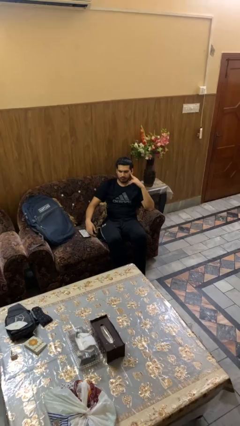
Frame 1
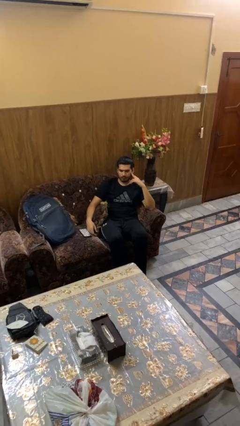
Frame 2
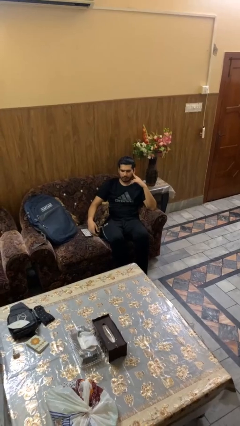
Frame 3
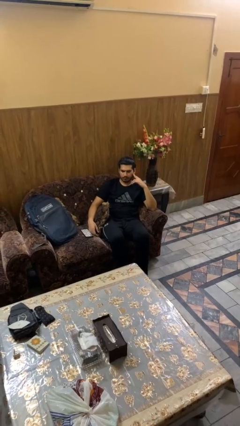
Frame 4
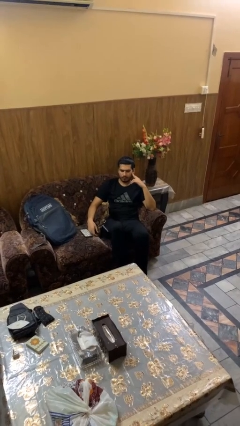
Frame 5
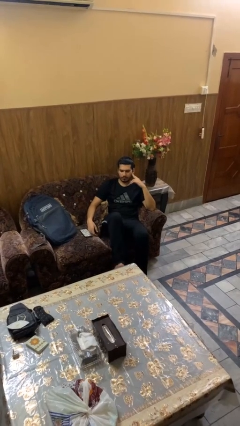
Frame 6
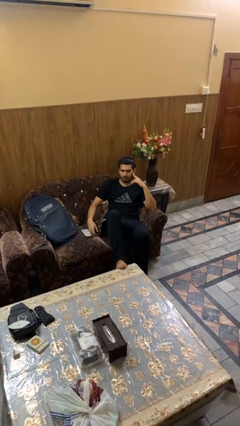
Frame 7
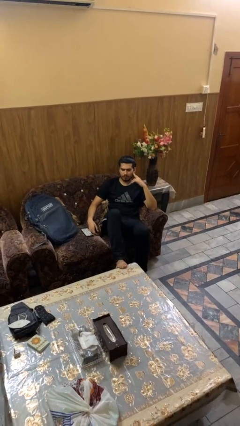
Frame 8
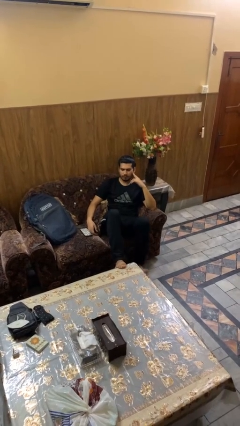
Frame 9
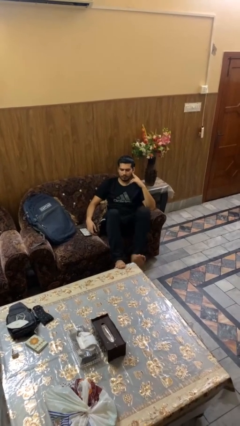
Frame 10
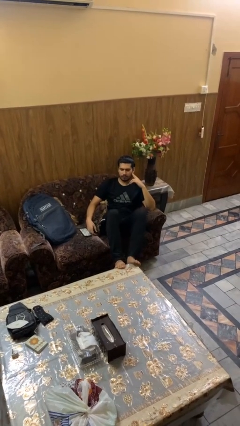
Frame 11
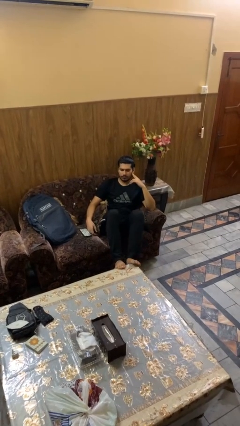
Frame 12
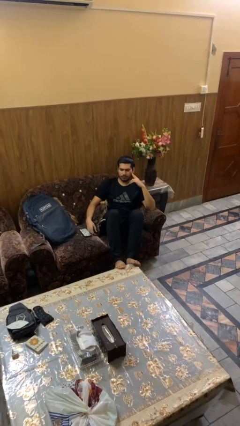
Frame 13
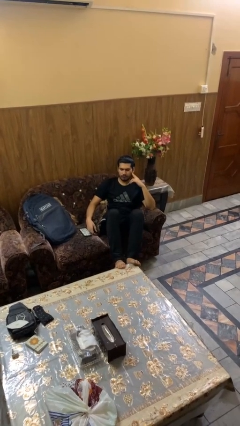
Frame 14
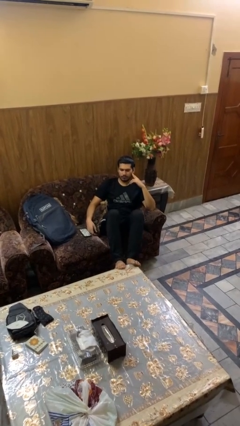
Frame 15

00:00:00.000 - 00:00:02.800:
person puts feet up

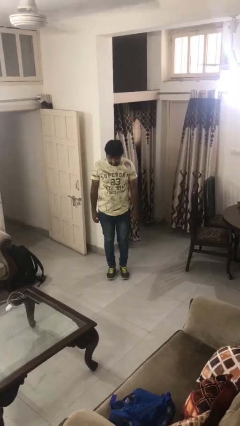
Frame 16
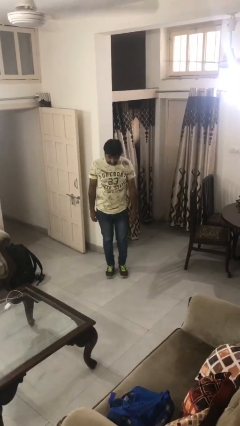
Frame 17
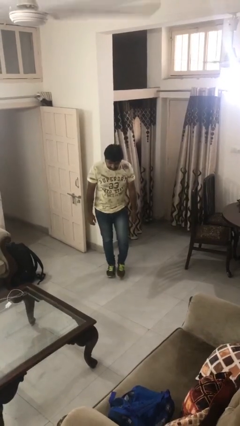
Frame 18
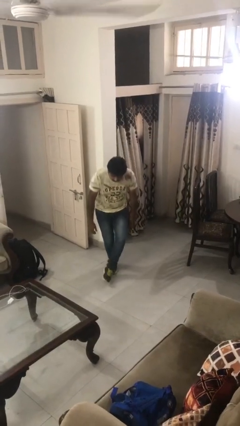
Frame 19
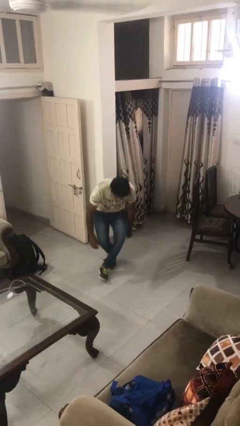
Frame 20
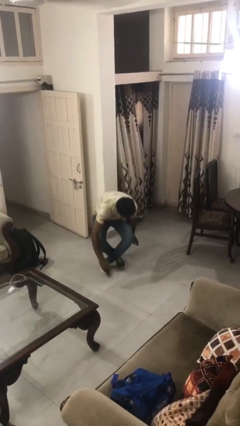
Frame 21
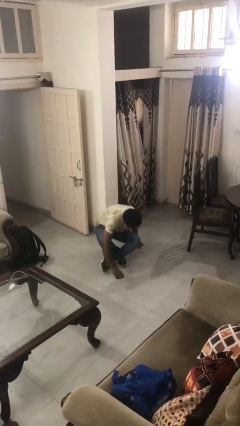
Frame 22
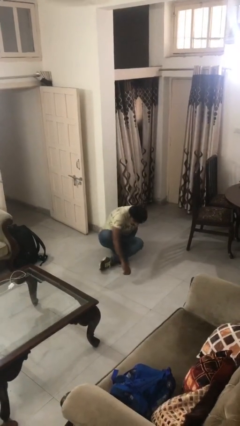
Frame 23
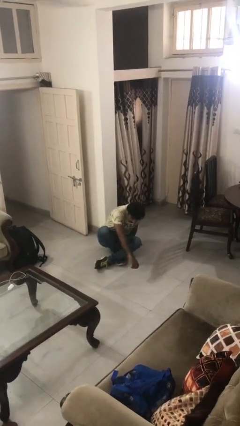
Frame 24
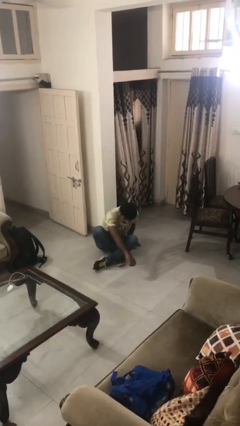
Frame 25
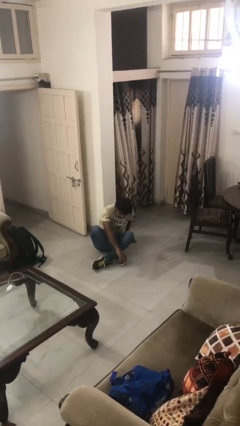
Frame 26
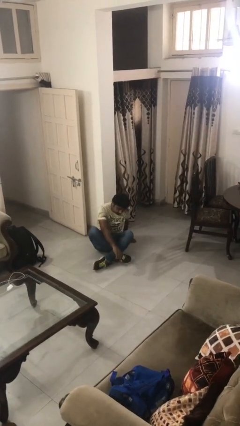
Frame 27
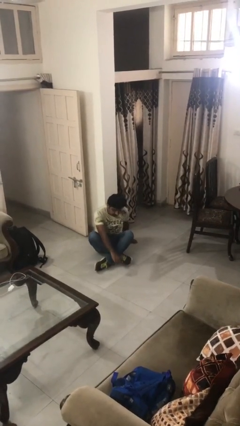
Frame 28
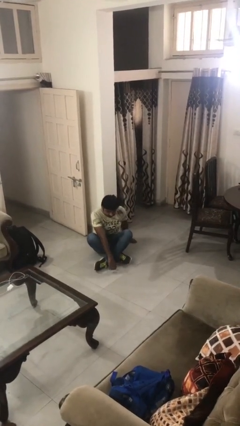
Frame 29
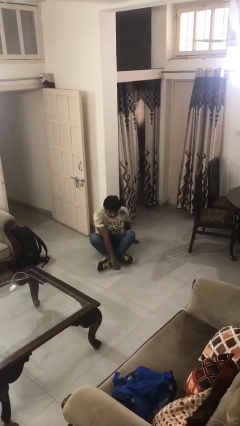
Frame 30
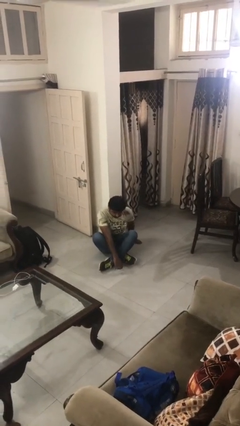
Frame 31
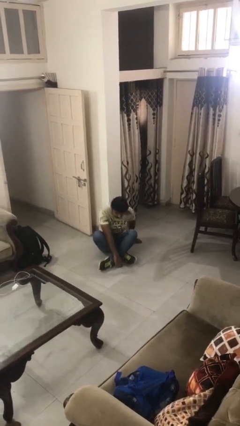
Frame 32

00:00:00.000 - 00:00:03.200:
person sits crisscross

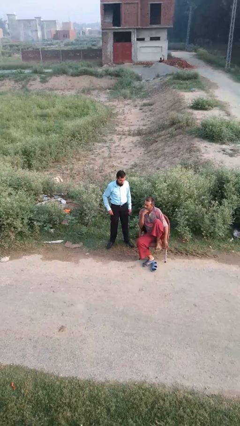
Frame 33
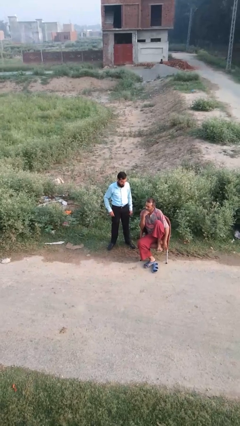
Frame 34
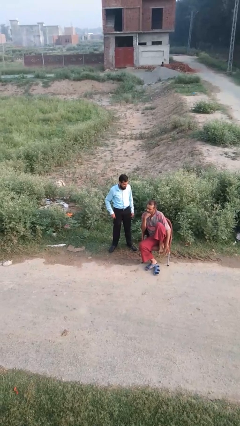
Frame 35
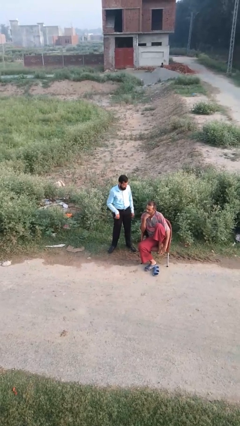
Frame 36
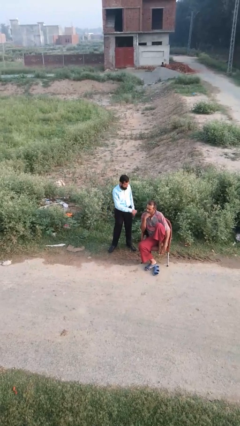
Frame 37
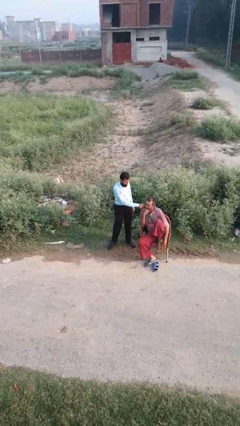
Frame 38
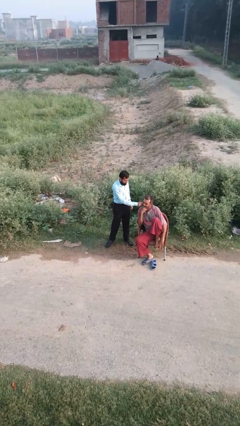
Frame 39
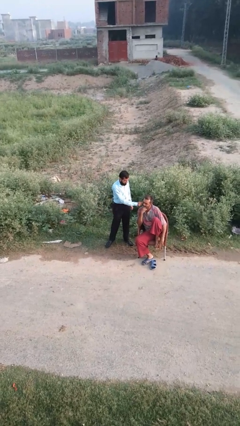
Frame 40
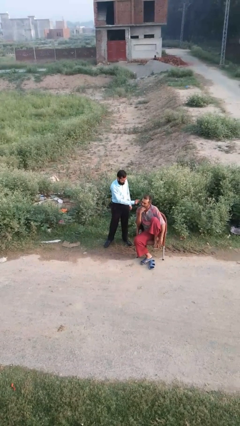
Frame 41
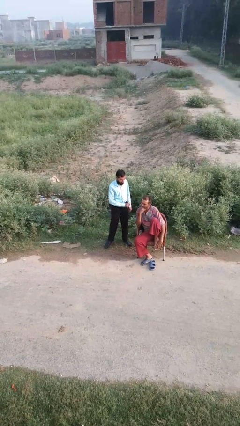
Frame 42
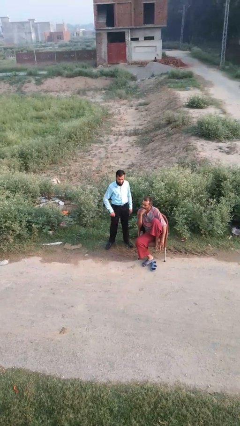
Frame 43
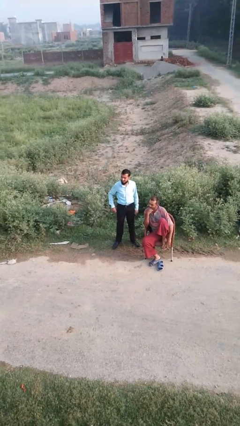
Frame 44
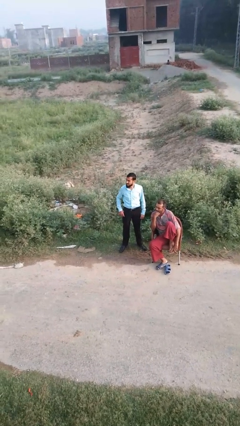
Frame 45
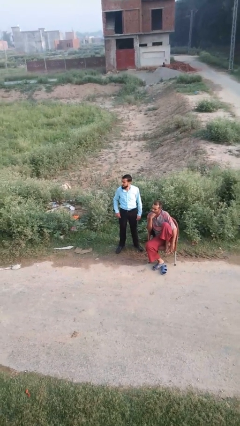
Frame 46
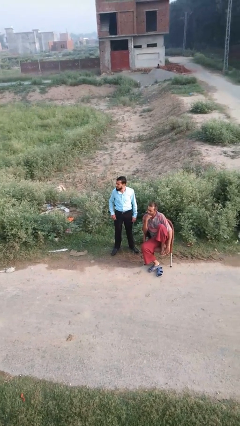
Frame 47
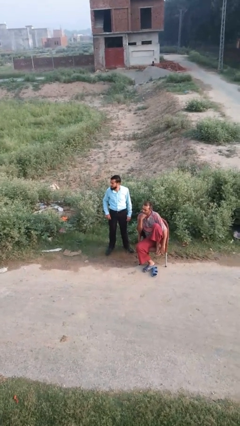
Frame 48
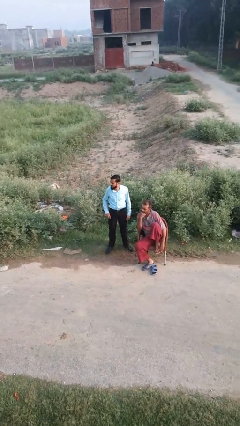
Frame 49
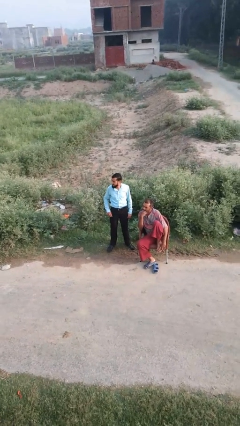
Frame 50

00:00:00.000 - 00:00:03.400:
person touches face of person

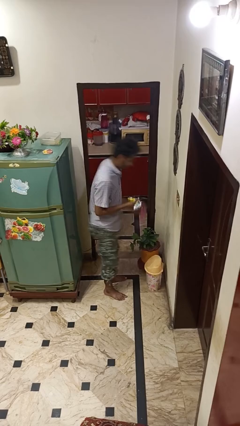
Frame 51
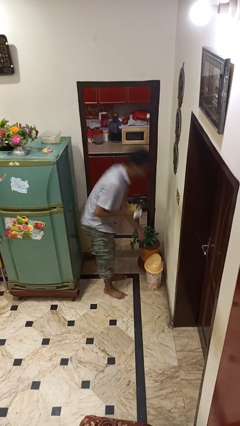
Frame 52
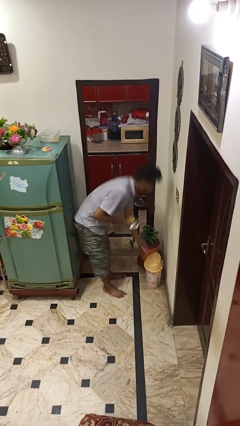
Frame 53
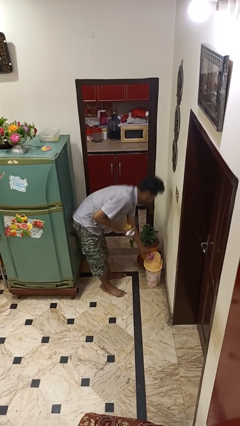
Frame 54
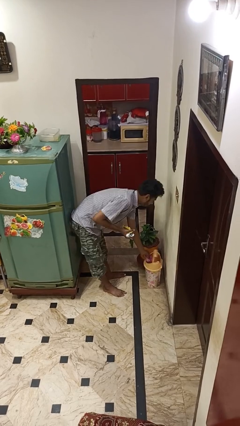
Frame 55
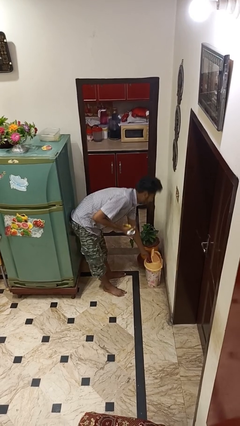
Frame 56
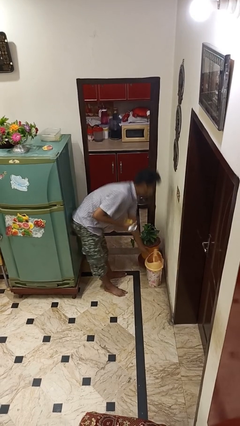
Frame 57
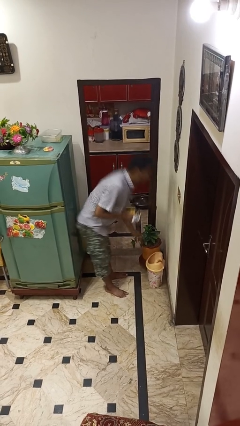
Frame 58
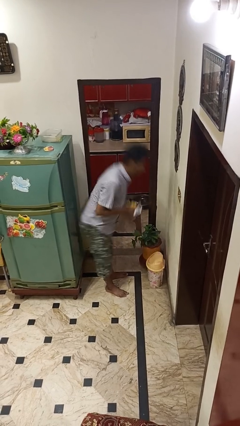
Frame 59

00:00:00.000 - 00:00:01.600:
person discards trash

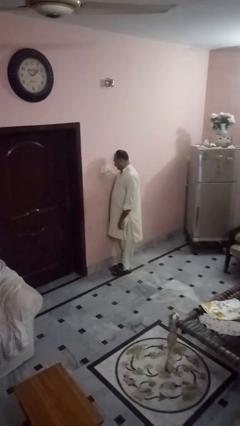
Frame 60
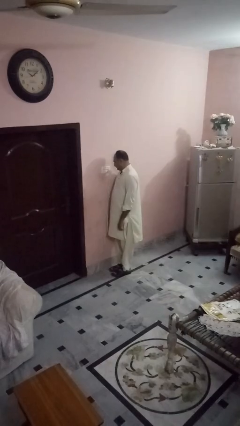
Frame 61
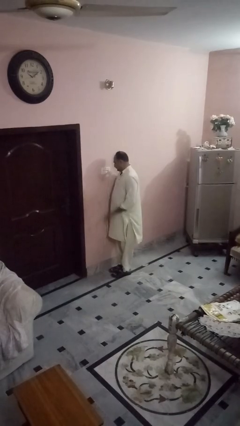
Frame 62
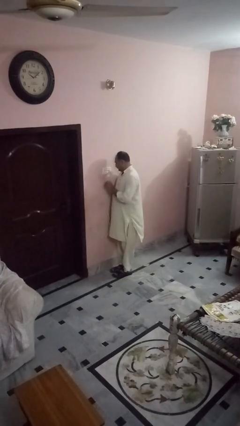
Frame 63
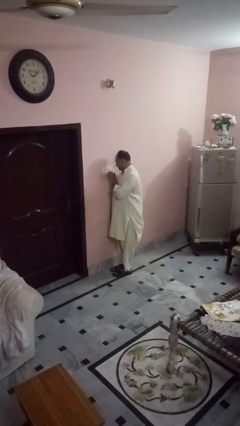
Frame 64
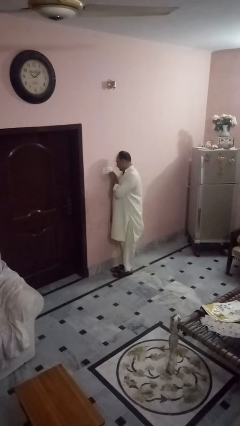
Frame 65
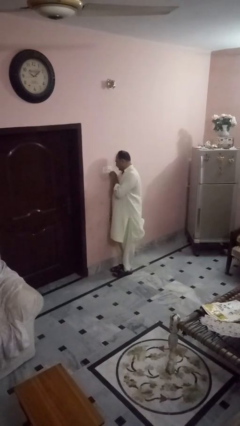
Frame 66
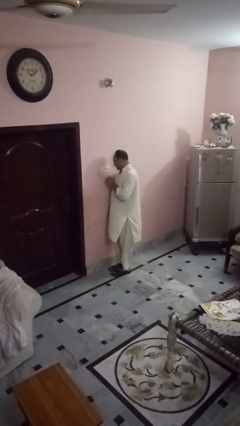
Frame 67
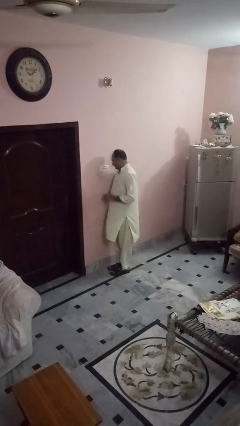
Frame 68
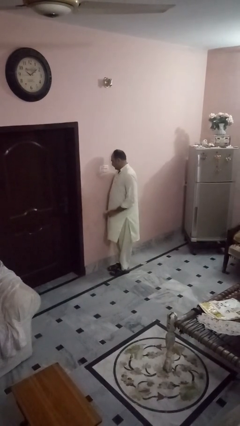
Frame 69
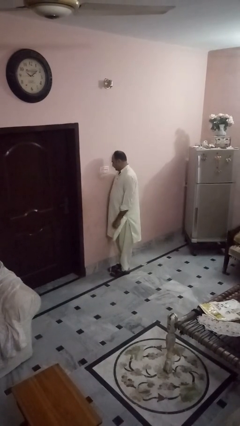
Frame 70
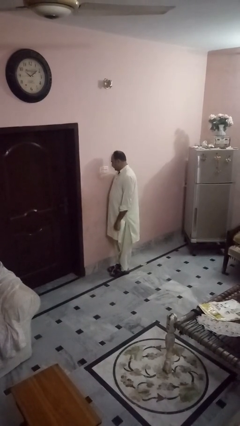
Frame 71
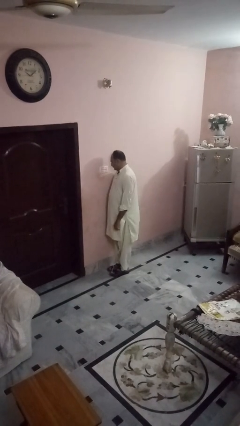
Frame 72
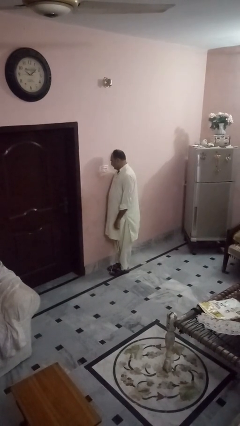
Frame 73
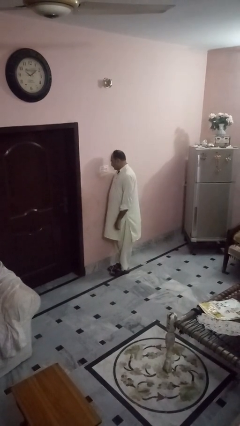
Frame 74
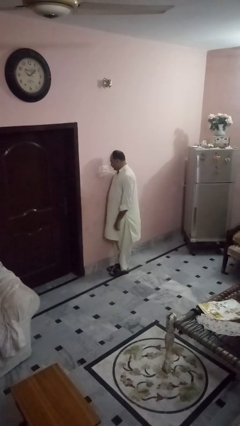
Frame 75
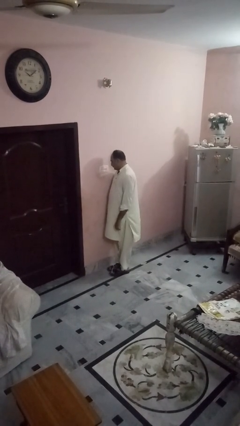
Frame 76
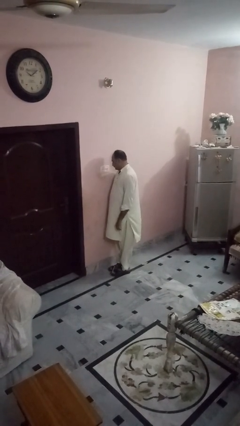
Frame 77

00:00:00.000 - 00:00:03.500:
person unplugs from electrical socket

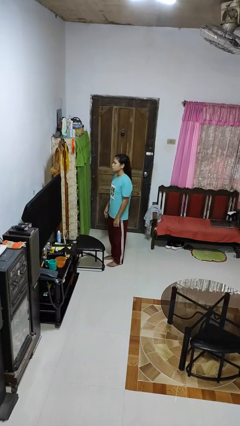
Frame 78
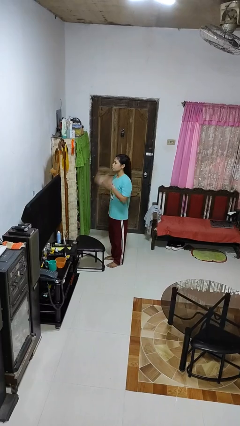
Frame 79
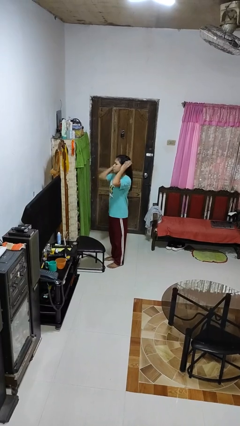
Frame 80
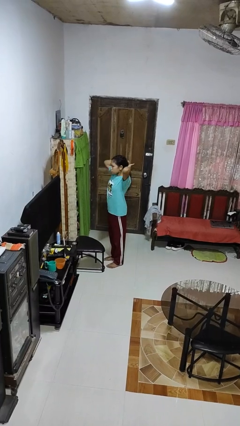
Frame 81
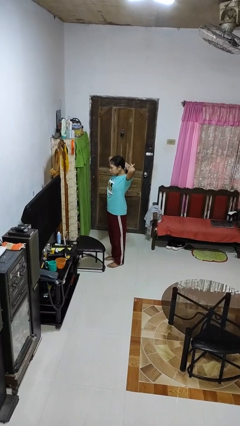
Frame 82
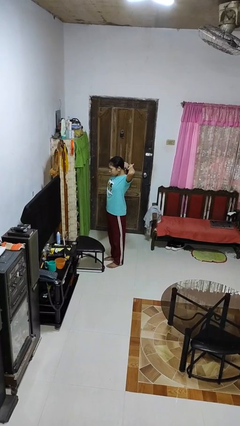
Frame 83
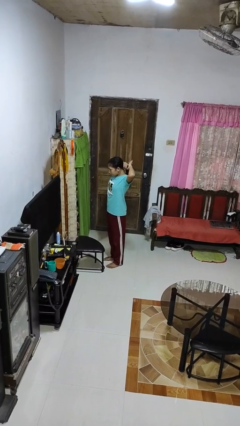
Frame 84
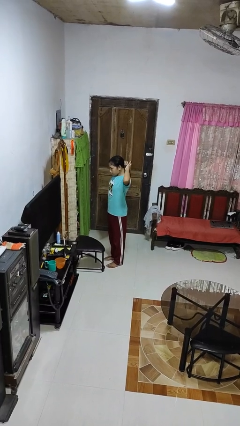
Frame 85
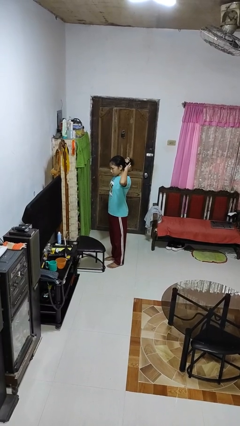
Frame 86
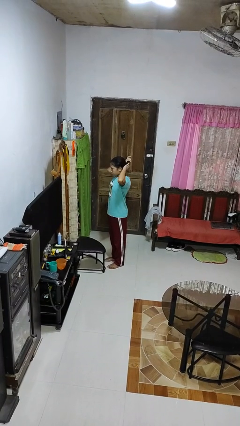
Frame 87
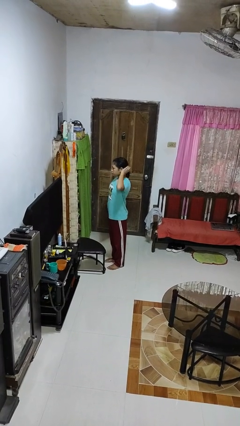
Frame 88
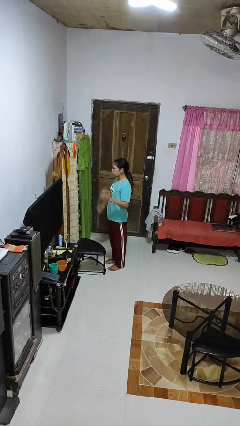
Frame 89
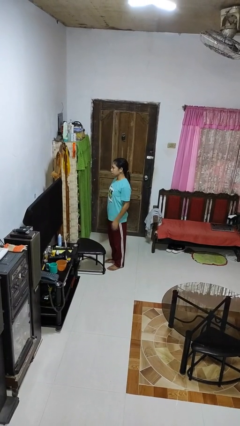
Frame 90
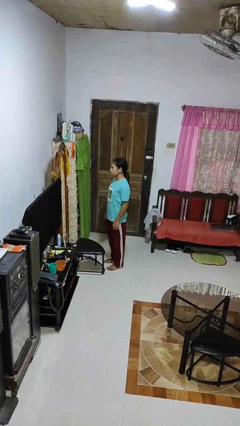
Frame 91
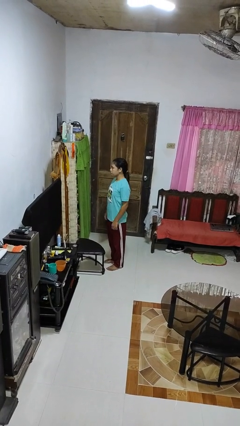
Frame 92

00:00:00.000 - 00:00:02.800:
person puts hair in ponytail

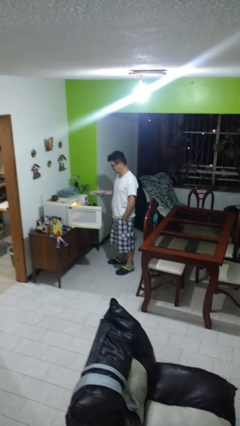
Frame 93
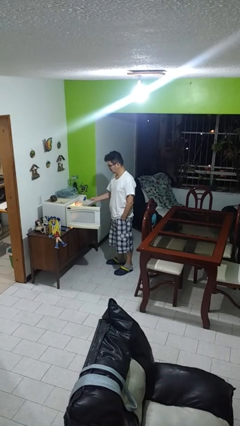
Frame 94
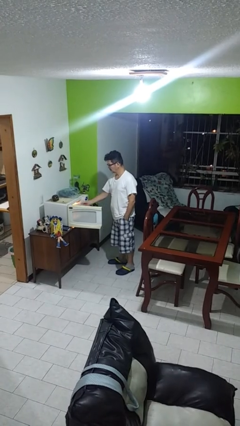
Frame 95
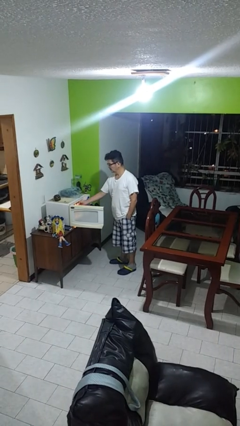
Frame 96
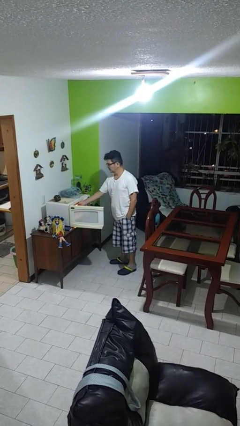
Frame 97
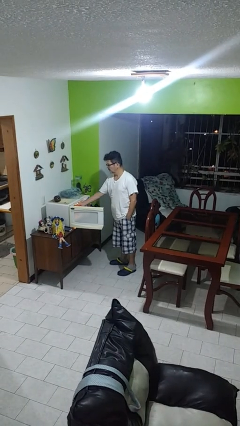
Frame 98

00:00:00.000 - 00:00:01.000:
person puts object into microwave
